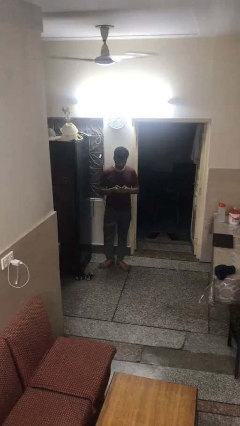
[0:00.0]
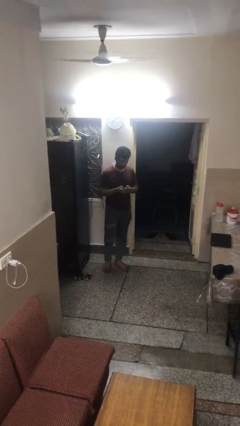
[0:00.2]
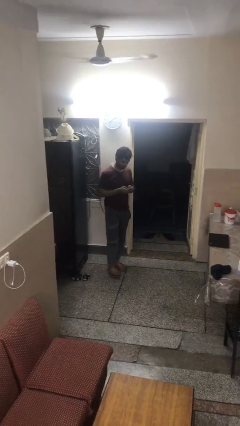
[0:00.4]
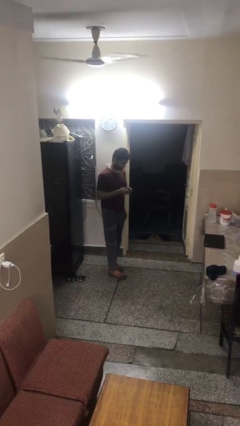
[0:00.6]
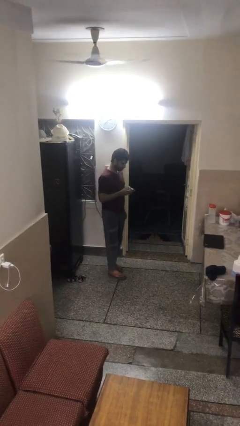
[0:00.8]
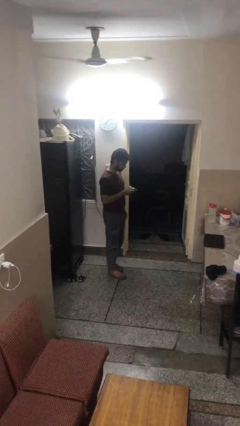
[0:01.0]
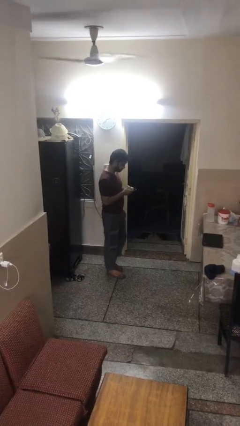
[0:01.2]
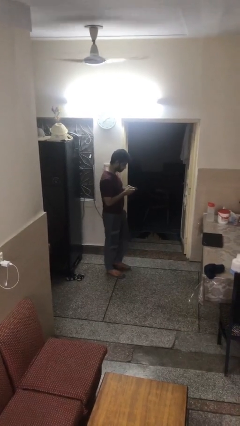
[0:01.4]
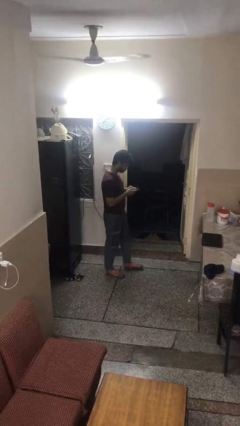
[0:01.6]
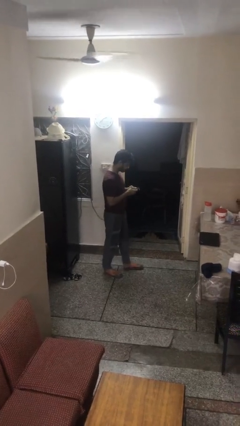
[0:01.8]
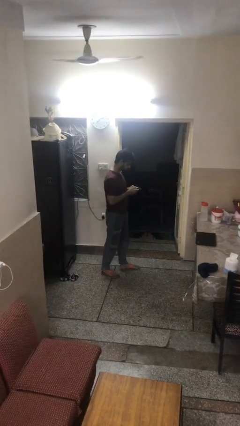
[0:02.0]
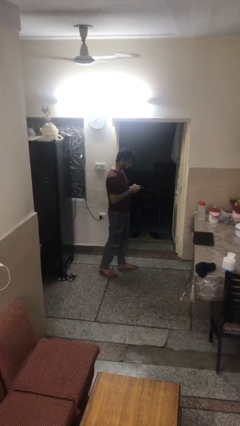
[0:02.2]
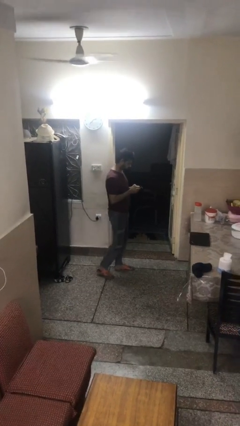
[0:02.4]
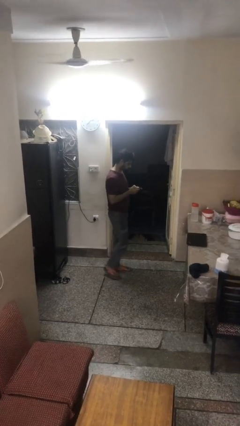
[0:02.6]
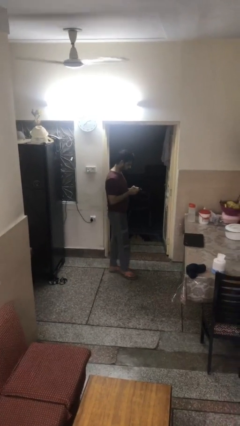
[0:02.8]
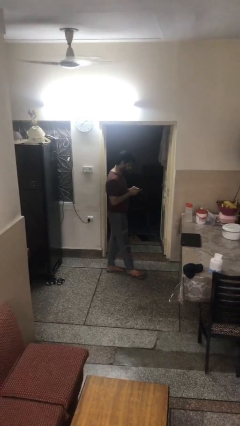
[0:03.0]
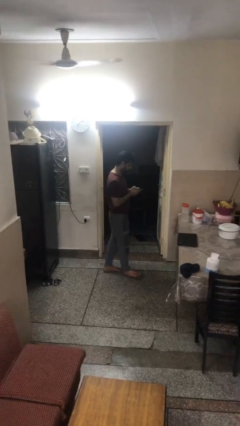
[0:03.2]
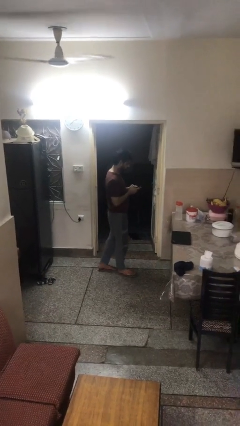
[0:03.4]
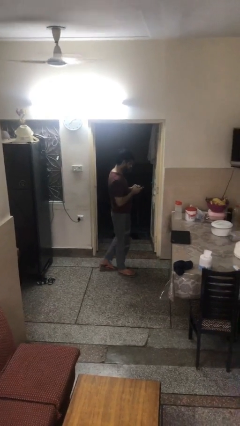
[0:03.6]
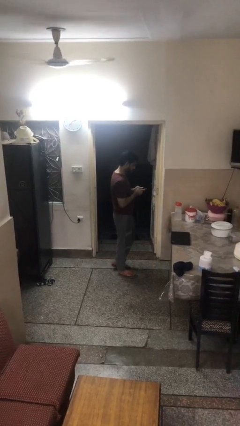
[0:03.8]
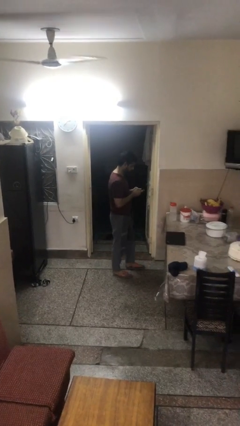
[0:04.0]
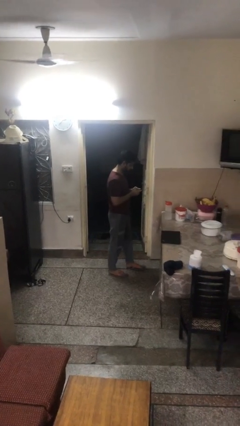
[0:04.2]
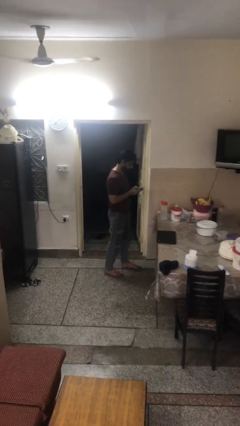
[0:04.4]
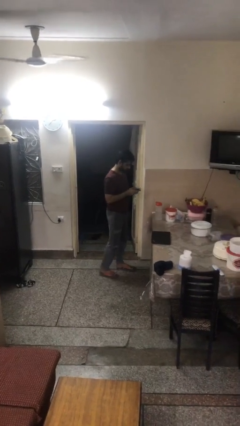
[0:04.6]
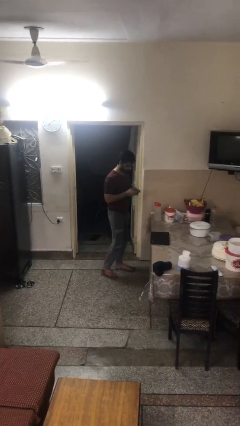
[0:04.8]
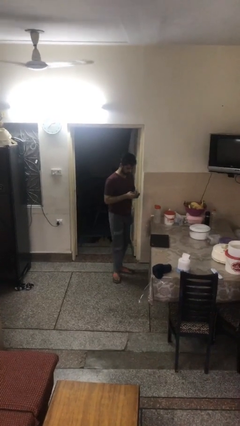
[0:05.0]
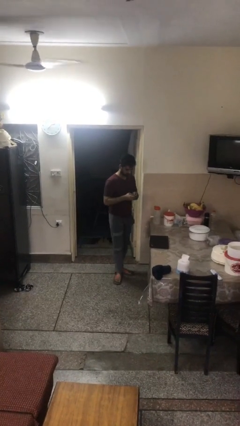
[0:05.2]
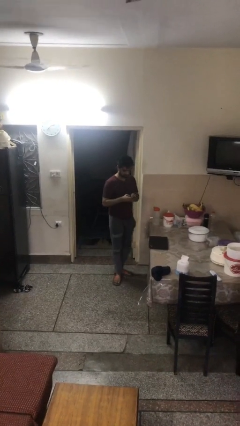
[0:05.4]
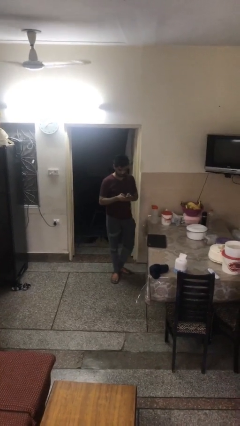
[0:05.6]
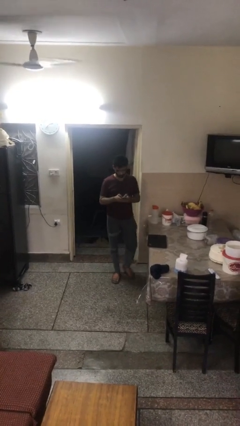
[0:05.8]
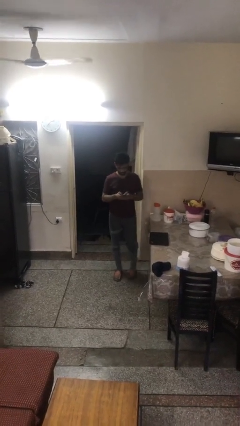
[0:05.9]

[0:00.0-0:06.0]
person texts on phone

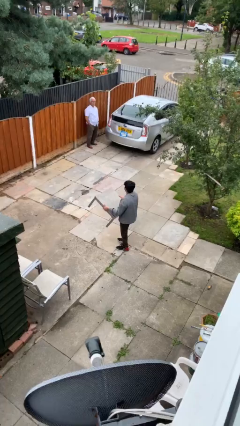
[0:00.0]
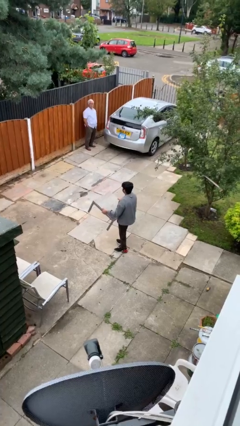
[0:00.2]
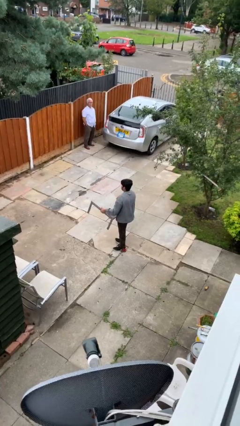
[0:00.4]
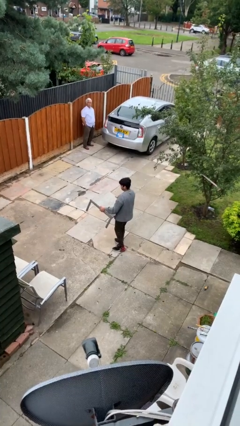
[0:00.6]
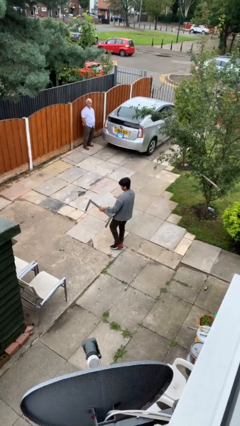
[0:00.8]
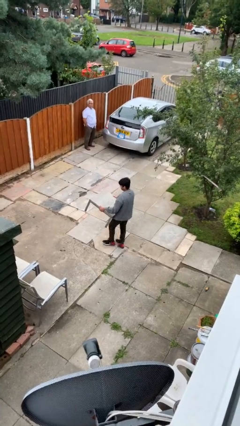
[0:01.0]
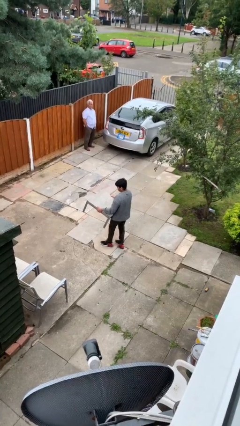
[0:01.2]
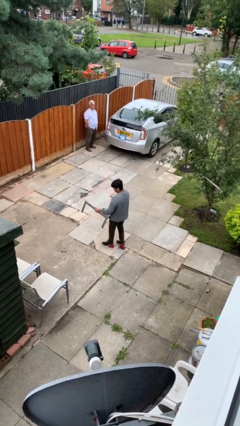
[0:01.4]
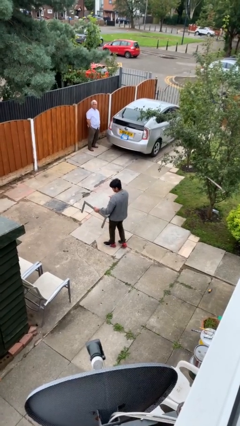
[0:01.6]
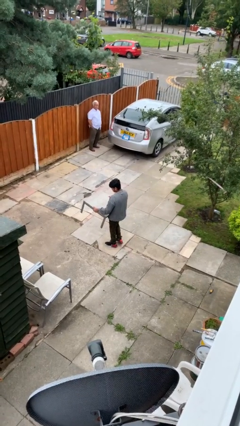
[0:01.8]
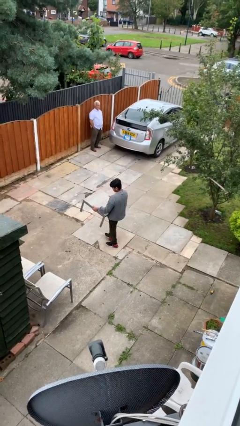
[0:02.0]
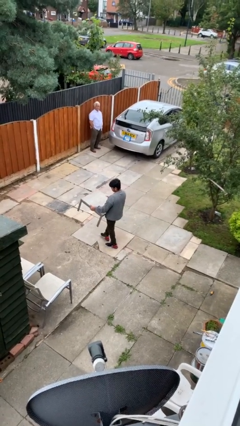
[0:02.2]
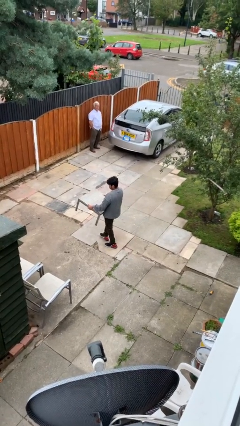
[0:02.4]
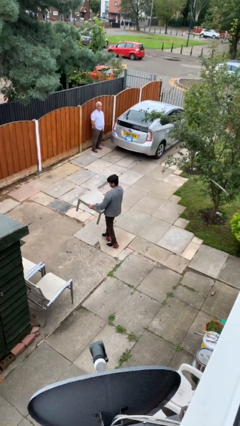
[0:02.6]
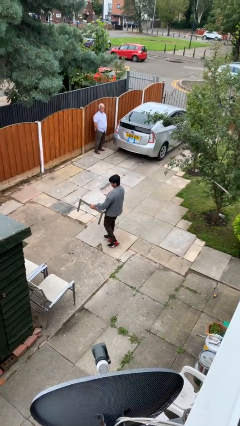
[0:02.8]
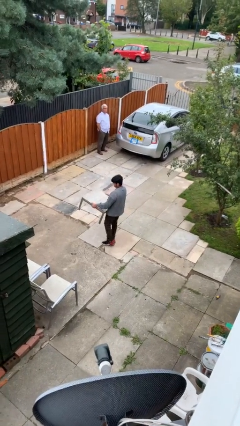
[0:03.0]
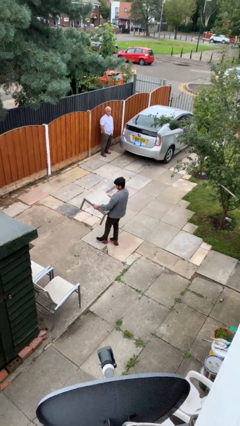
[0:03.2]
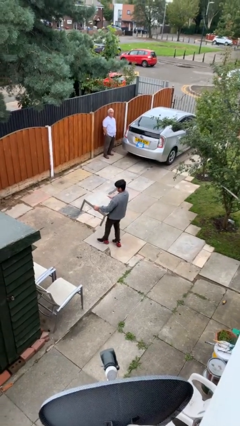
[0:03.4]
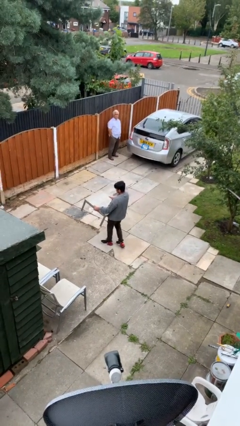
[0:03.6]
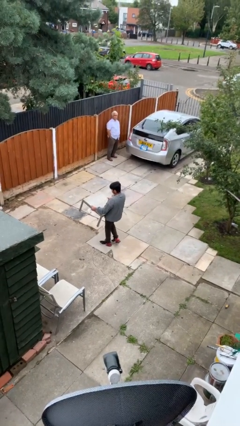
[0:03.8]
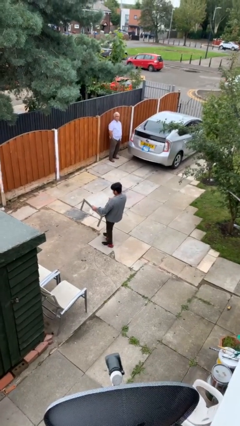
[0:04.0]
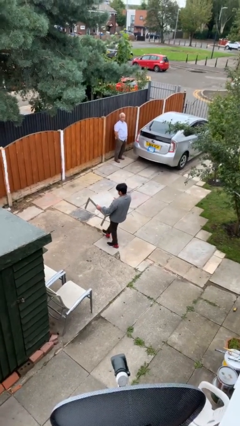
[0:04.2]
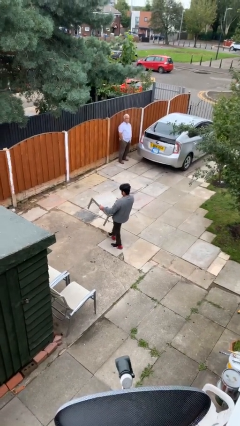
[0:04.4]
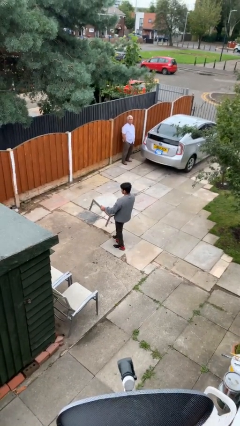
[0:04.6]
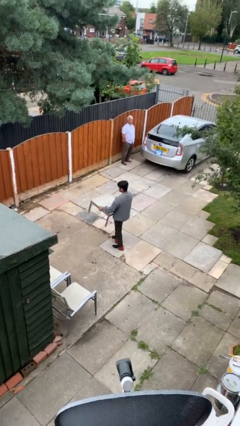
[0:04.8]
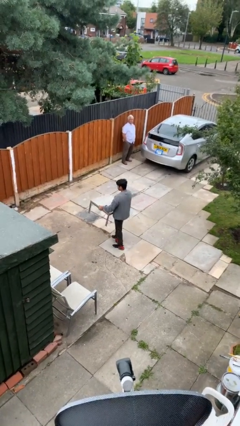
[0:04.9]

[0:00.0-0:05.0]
person carries heavy object

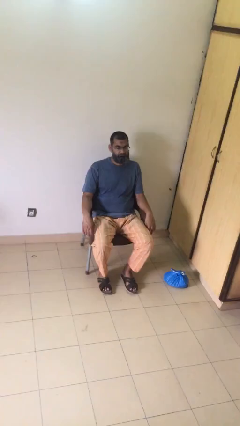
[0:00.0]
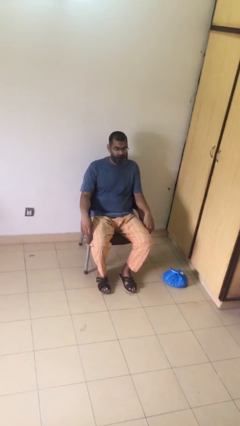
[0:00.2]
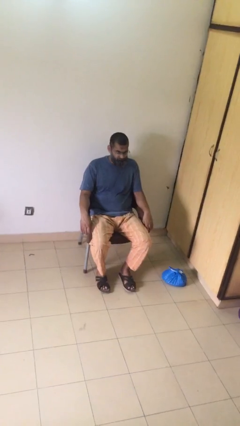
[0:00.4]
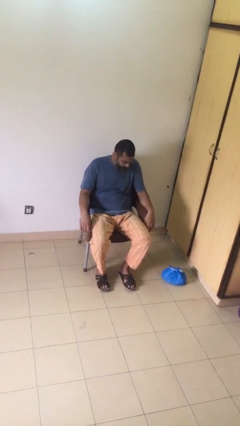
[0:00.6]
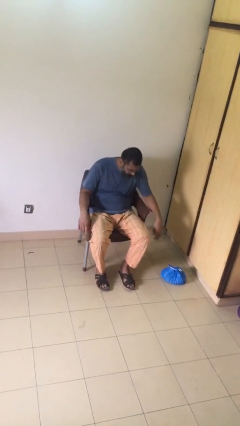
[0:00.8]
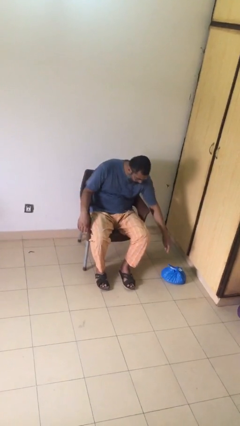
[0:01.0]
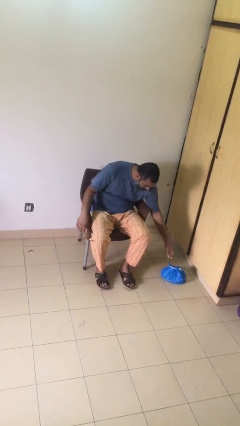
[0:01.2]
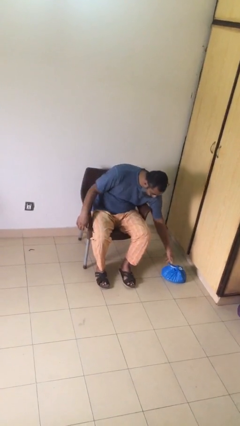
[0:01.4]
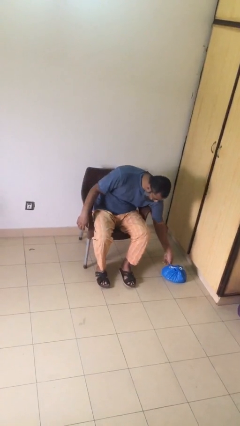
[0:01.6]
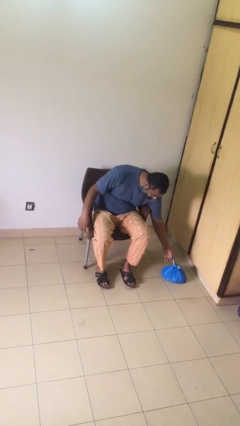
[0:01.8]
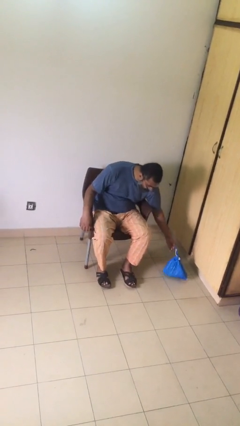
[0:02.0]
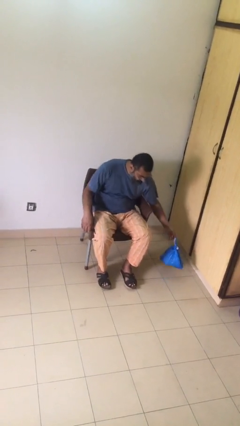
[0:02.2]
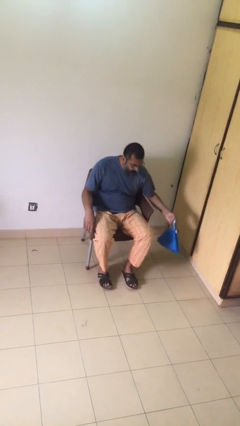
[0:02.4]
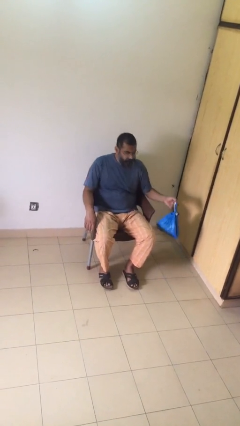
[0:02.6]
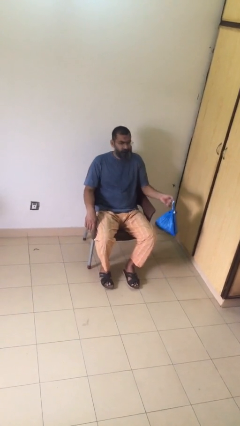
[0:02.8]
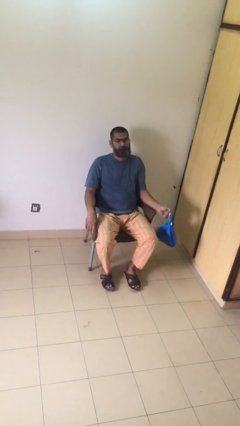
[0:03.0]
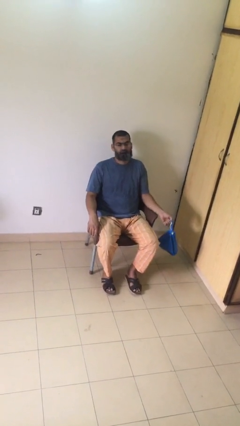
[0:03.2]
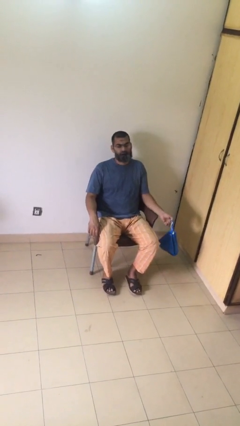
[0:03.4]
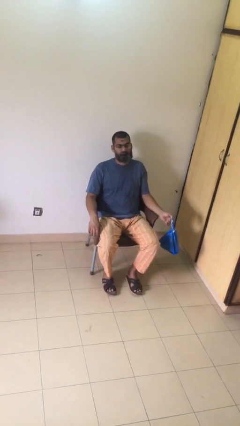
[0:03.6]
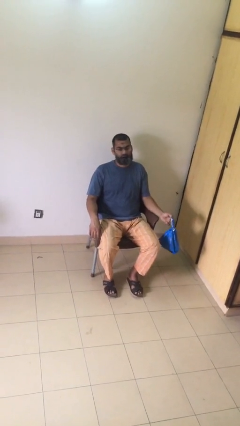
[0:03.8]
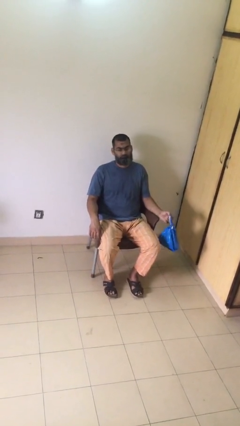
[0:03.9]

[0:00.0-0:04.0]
person picks up object from floor

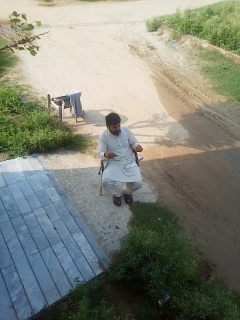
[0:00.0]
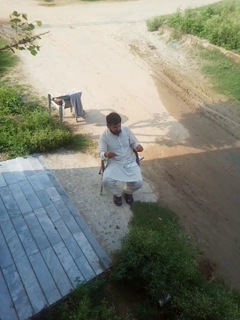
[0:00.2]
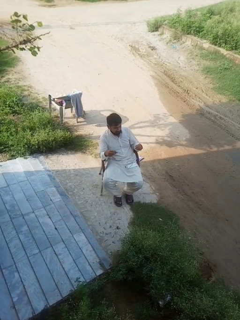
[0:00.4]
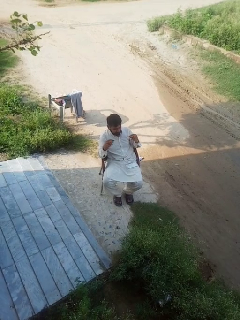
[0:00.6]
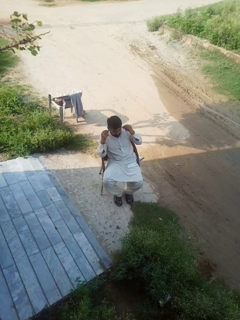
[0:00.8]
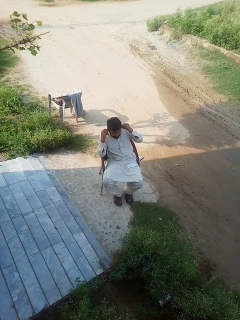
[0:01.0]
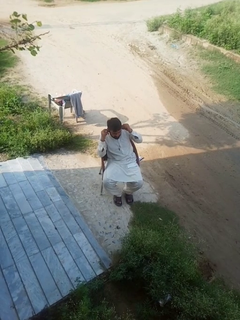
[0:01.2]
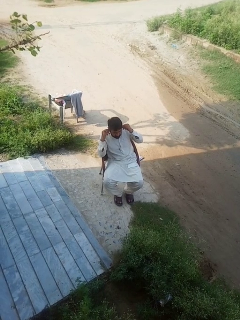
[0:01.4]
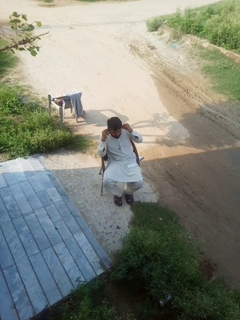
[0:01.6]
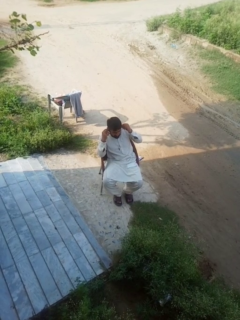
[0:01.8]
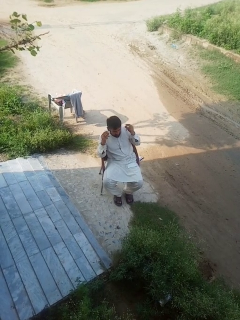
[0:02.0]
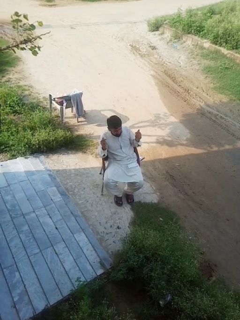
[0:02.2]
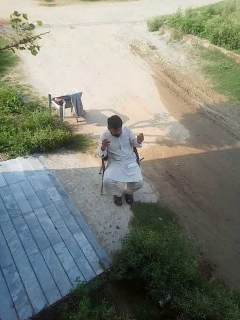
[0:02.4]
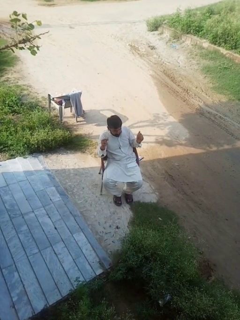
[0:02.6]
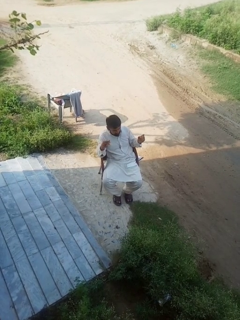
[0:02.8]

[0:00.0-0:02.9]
person puts on headphones

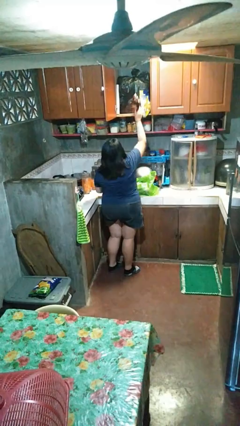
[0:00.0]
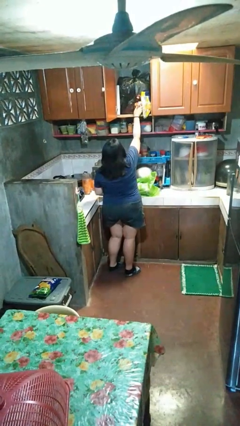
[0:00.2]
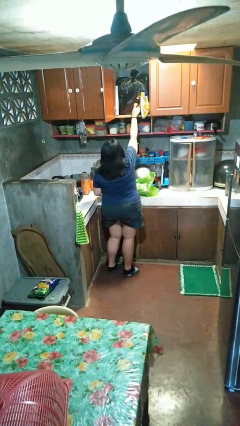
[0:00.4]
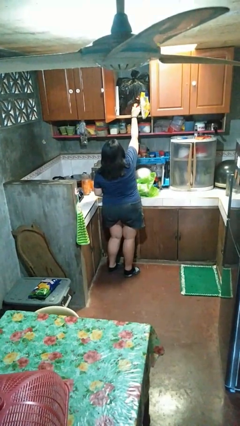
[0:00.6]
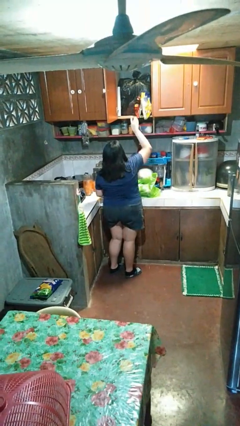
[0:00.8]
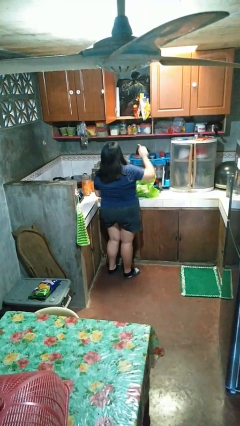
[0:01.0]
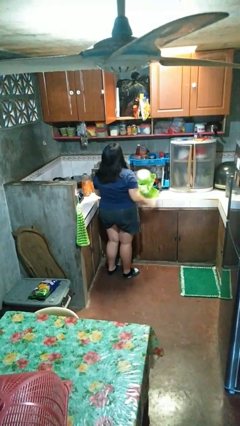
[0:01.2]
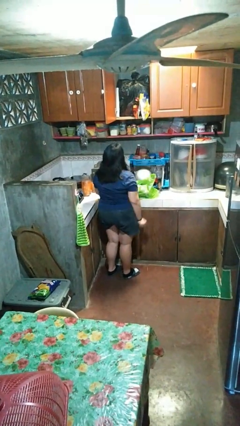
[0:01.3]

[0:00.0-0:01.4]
person loads groceries into cabinet
